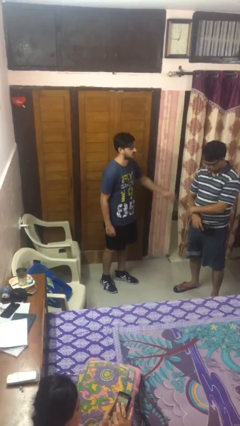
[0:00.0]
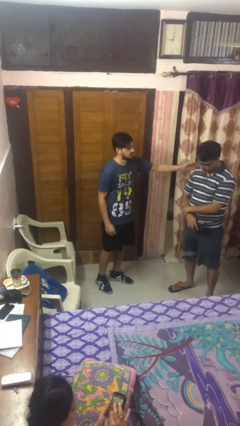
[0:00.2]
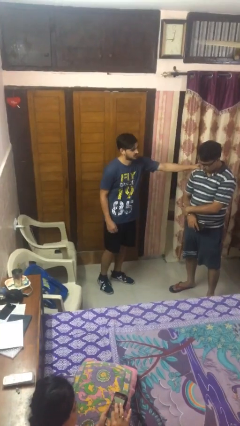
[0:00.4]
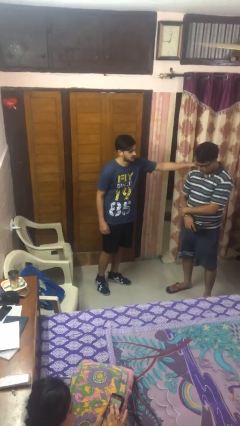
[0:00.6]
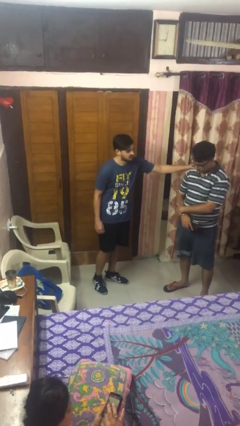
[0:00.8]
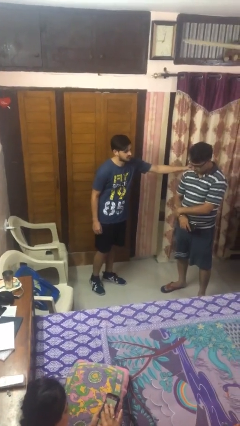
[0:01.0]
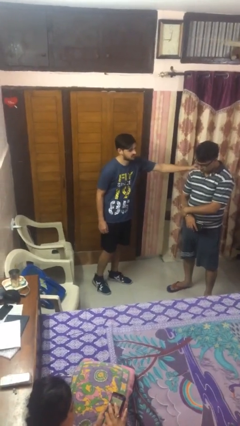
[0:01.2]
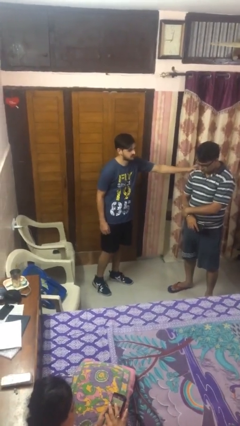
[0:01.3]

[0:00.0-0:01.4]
person pounds shoulders of person

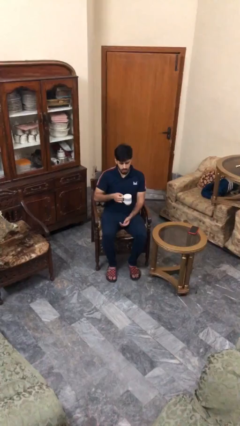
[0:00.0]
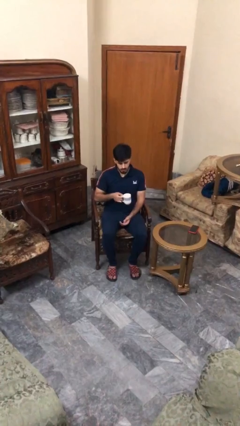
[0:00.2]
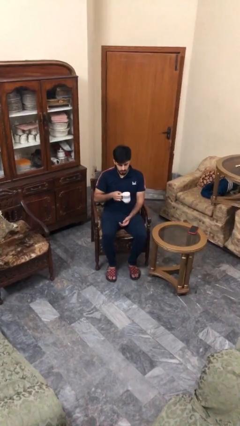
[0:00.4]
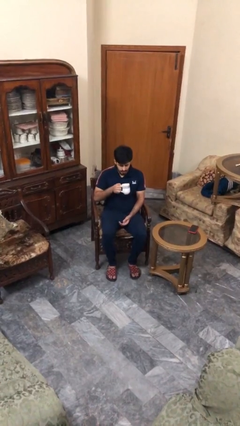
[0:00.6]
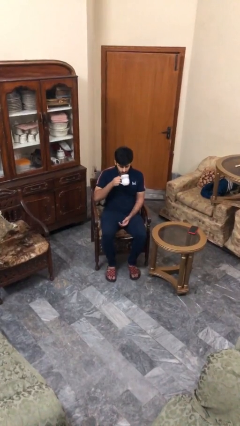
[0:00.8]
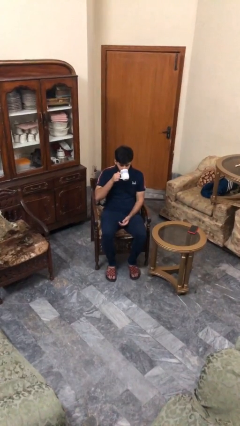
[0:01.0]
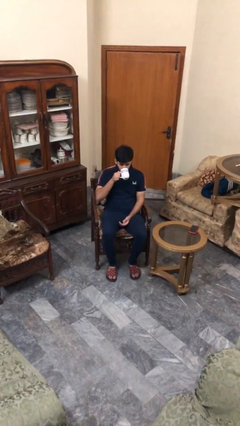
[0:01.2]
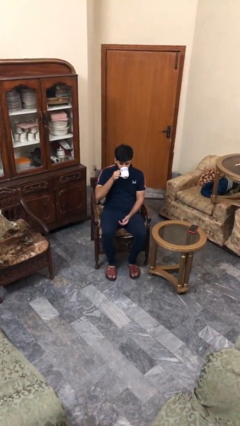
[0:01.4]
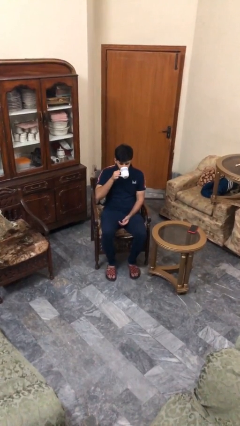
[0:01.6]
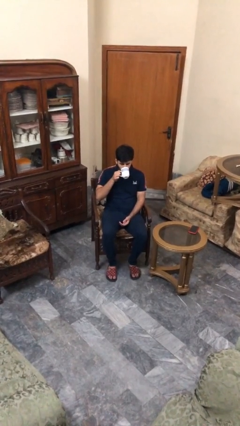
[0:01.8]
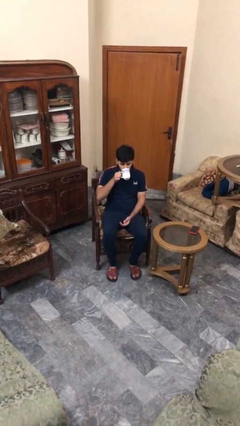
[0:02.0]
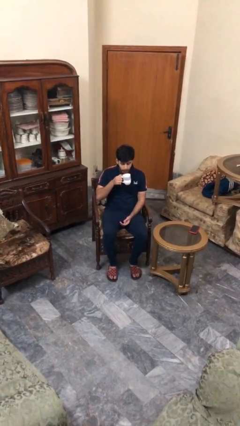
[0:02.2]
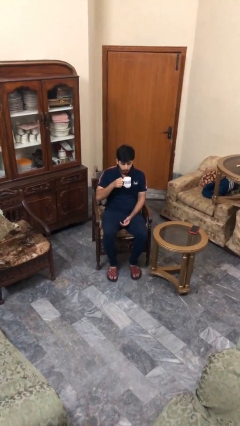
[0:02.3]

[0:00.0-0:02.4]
person drinks from mug

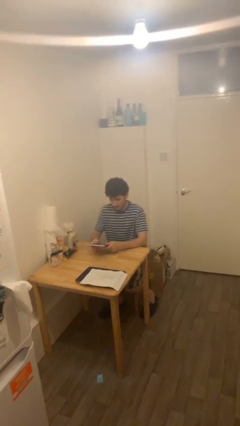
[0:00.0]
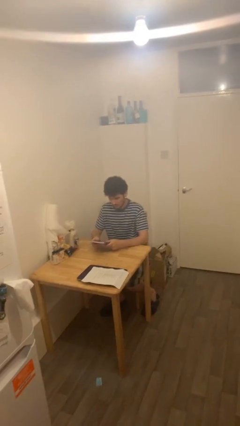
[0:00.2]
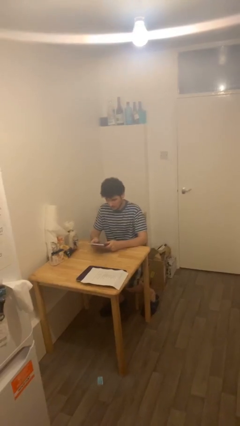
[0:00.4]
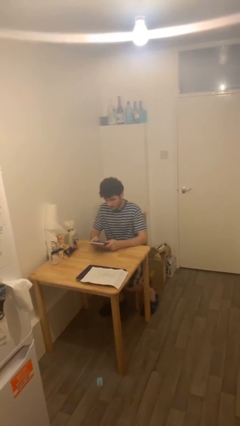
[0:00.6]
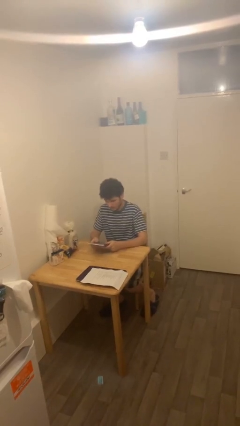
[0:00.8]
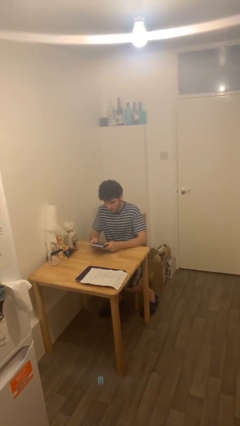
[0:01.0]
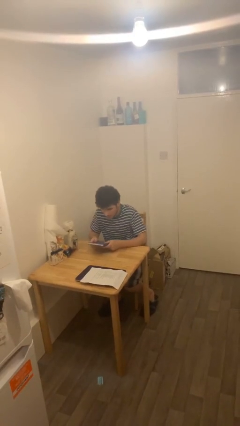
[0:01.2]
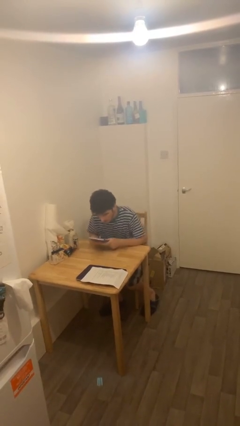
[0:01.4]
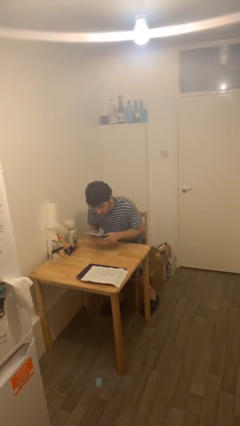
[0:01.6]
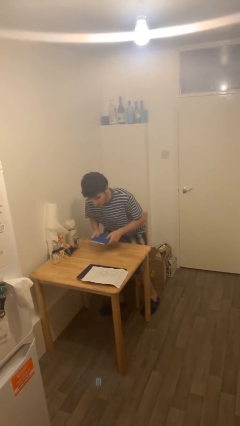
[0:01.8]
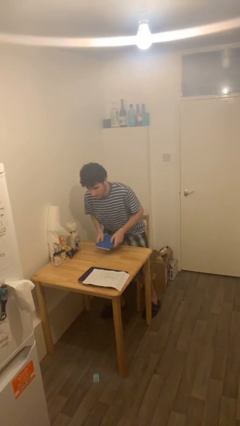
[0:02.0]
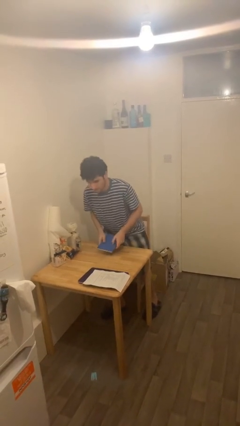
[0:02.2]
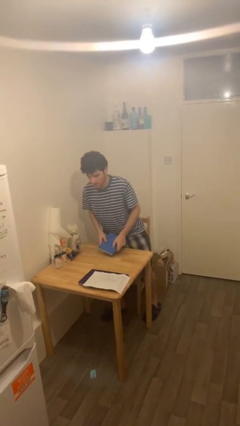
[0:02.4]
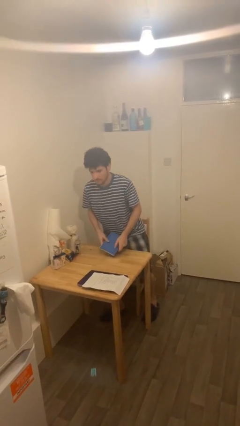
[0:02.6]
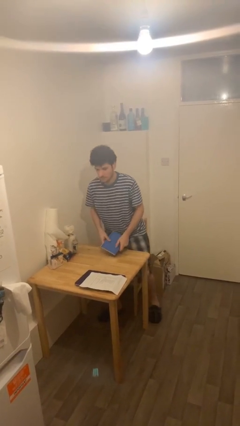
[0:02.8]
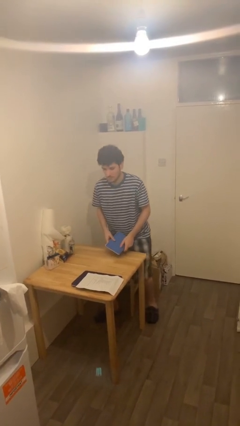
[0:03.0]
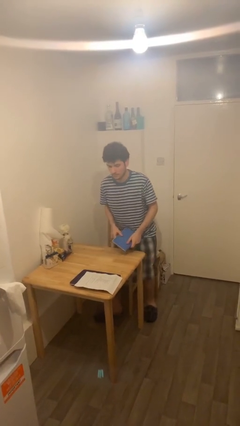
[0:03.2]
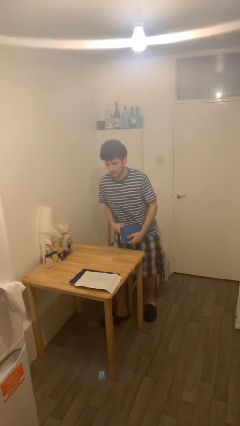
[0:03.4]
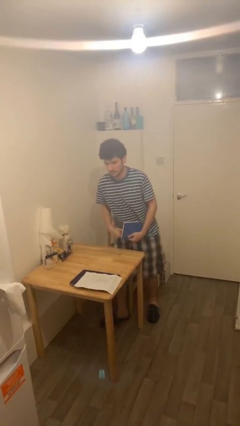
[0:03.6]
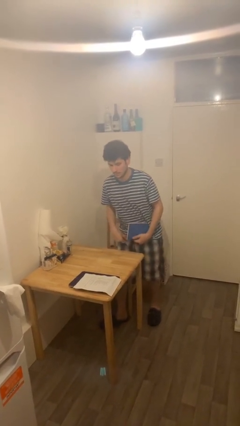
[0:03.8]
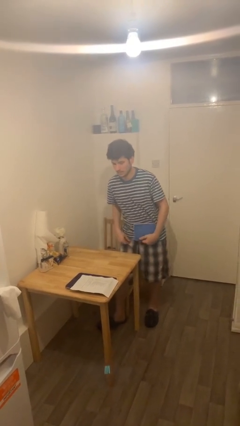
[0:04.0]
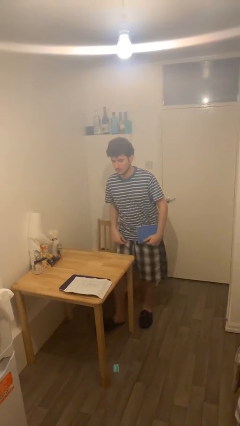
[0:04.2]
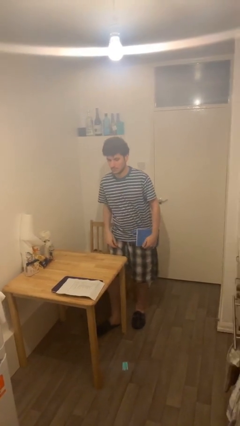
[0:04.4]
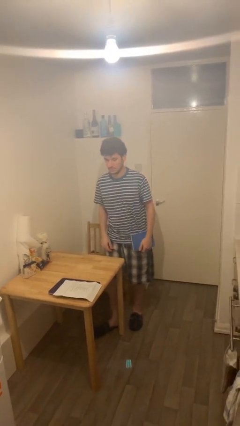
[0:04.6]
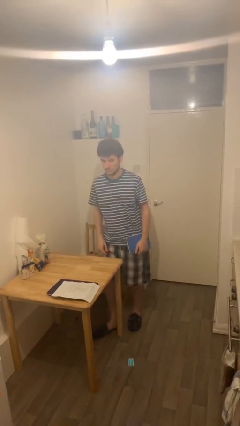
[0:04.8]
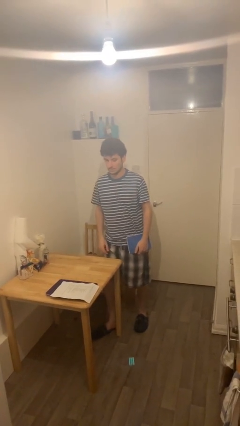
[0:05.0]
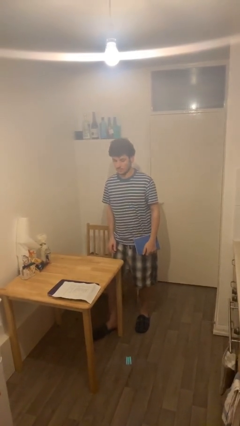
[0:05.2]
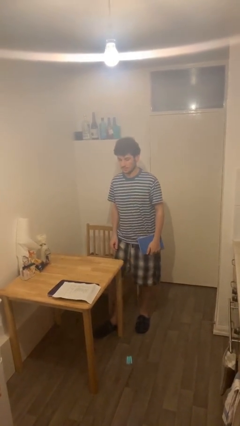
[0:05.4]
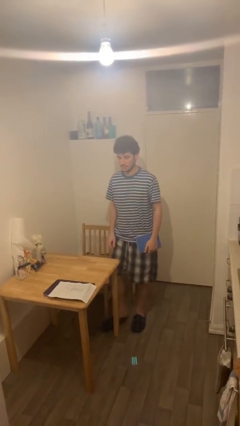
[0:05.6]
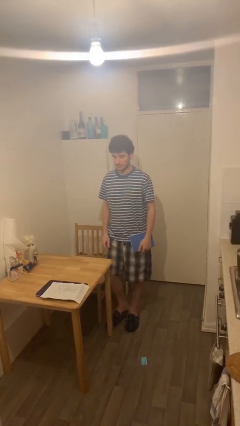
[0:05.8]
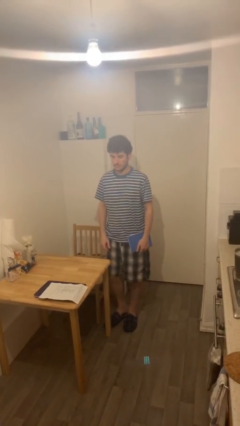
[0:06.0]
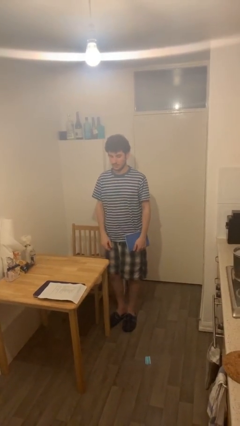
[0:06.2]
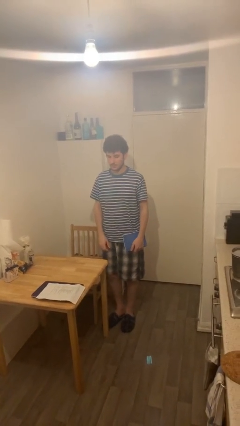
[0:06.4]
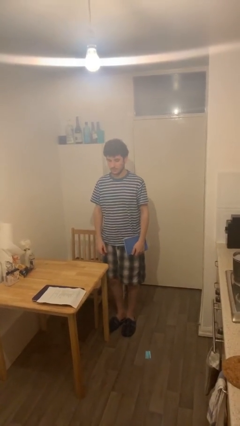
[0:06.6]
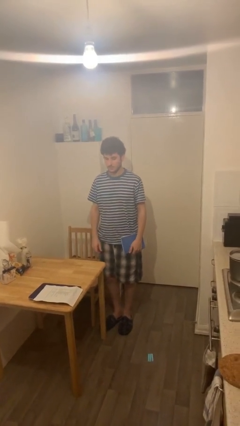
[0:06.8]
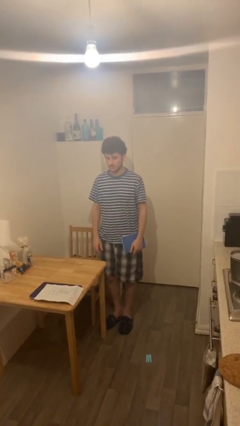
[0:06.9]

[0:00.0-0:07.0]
person stands up

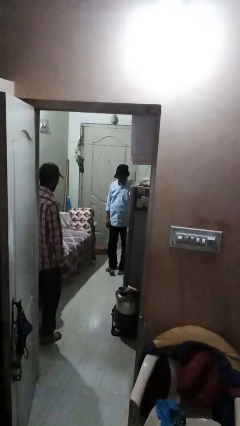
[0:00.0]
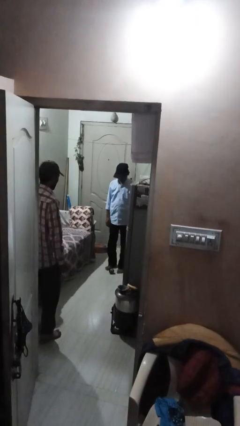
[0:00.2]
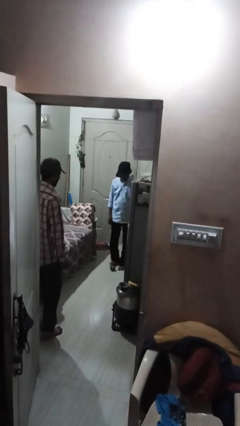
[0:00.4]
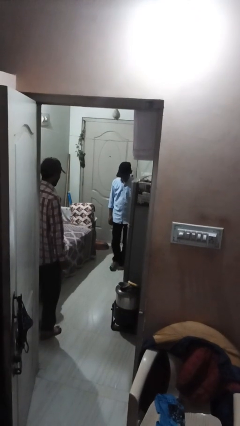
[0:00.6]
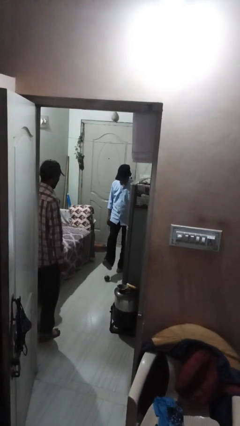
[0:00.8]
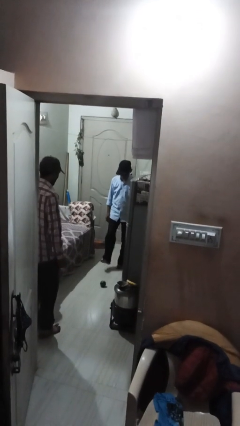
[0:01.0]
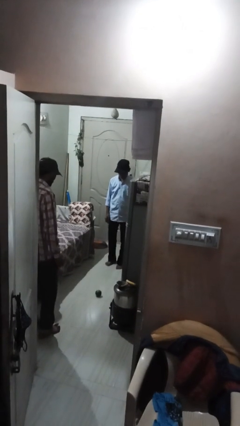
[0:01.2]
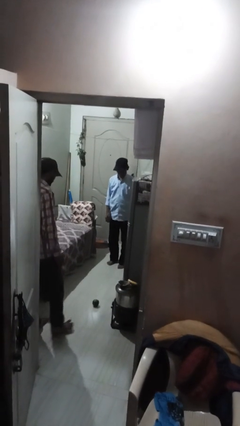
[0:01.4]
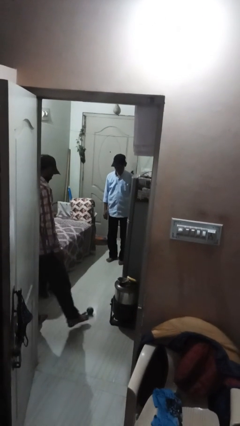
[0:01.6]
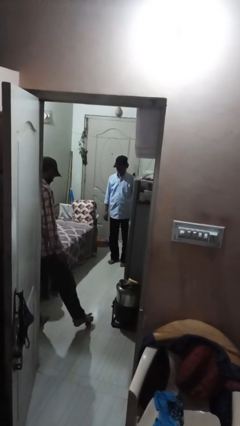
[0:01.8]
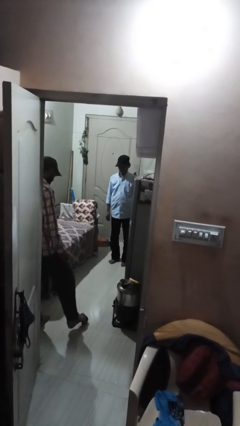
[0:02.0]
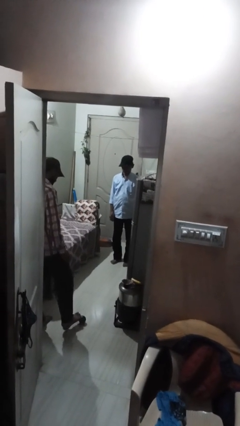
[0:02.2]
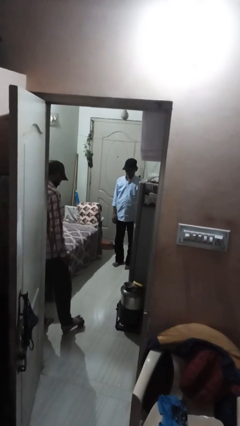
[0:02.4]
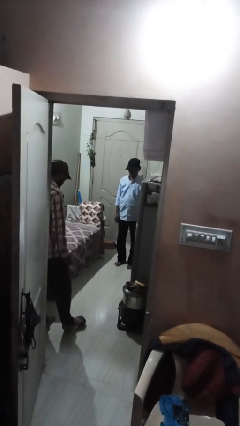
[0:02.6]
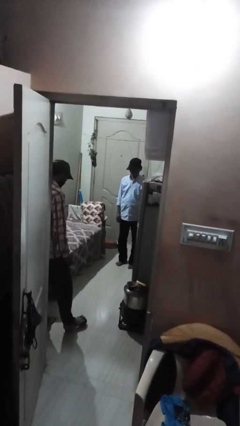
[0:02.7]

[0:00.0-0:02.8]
person kicks object to person

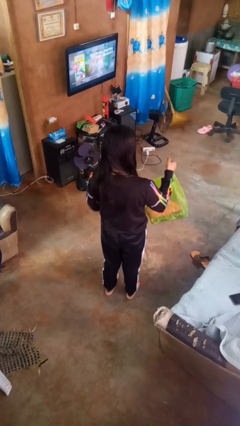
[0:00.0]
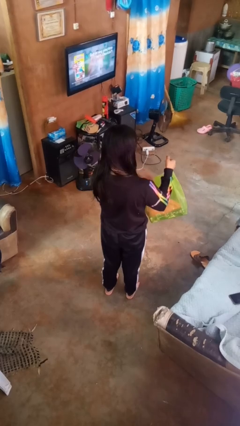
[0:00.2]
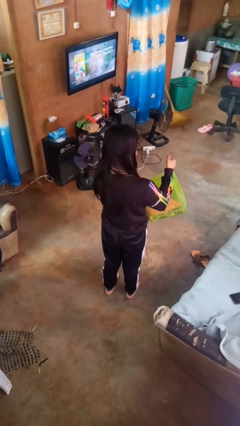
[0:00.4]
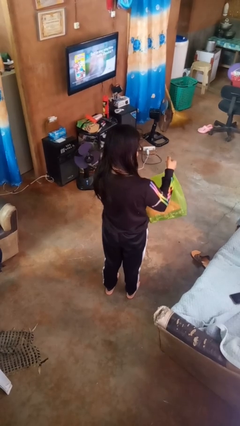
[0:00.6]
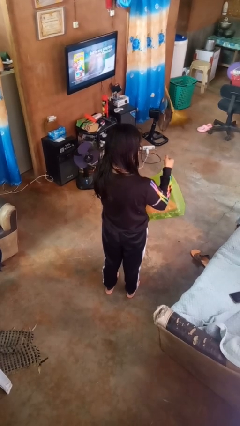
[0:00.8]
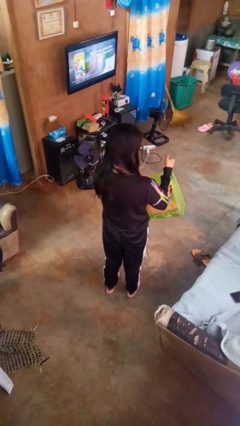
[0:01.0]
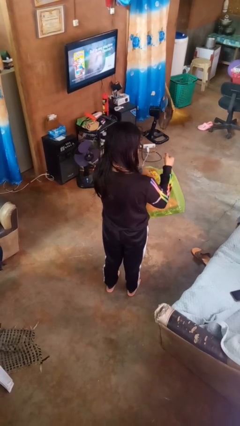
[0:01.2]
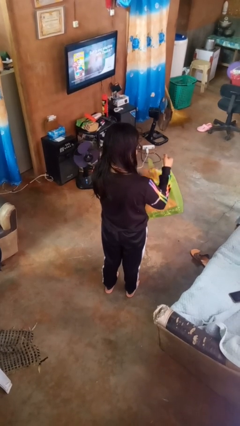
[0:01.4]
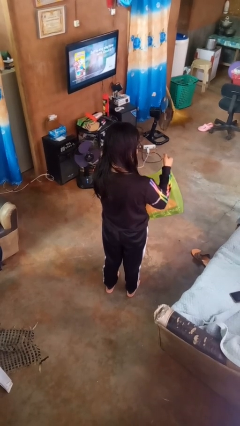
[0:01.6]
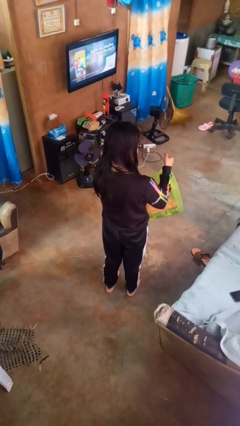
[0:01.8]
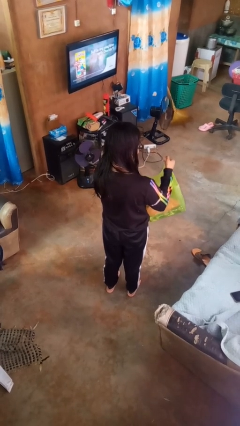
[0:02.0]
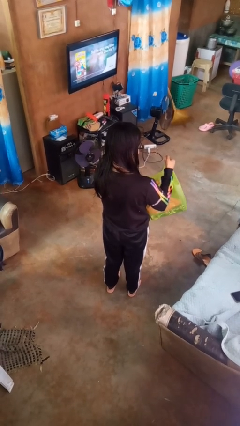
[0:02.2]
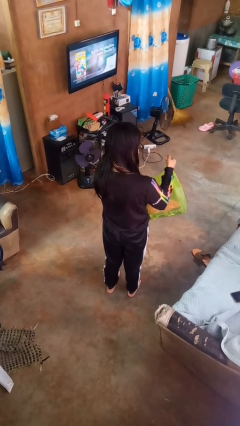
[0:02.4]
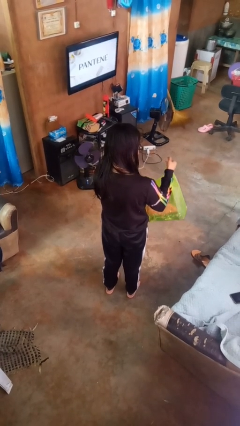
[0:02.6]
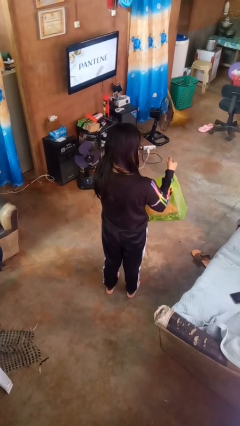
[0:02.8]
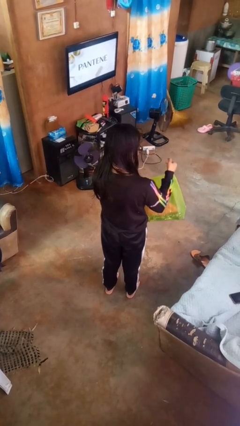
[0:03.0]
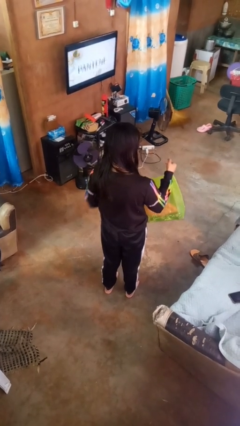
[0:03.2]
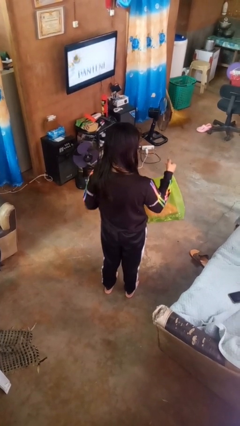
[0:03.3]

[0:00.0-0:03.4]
person searches in bag

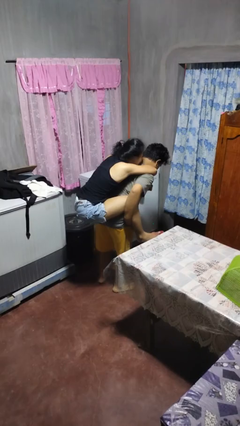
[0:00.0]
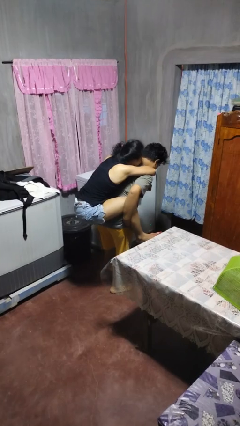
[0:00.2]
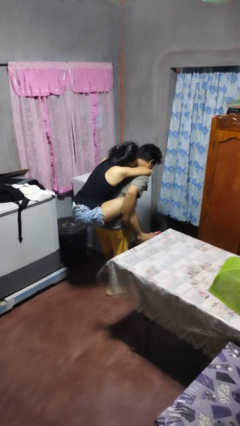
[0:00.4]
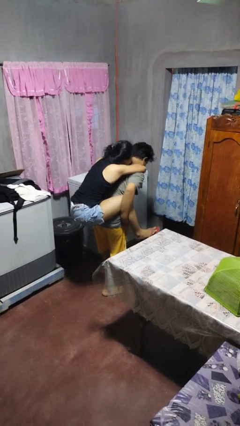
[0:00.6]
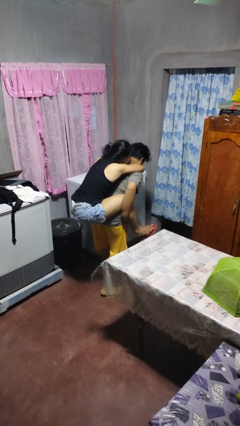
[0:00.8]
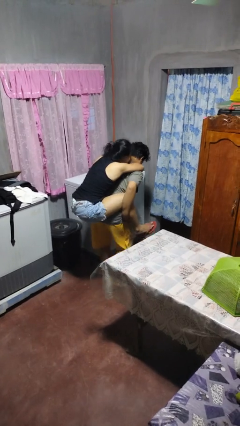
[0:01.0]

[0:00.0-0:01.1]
person carries person on back
